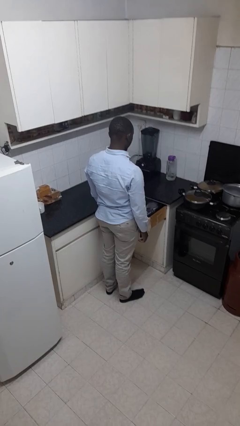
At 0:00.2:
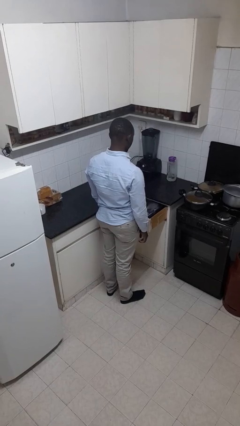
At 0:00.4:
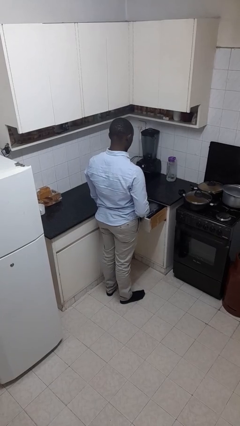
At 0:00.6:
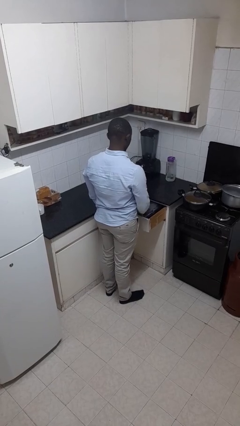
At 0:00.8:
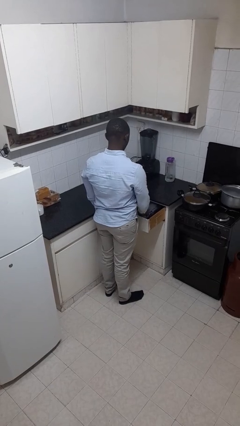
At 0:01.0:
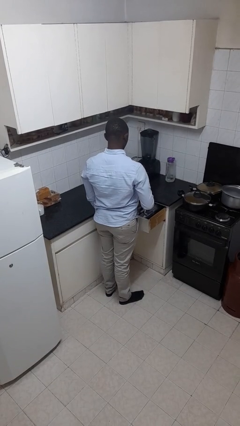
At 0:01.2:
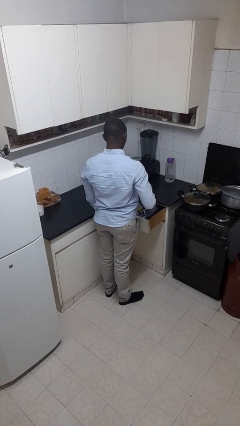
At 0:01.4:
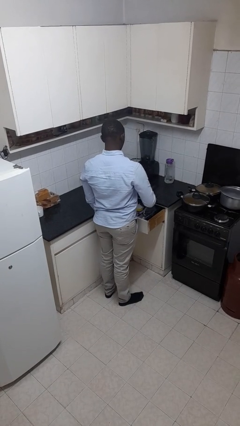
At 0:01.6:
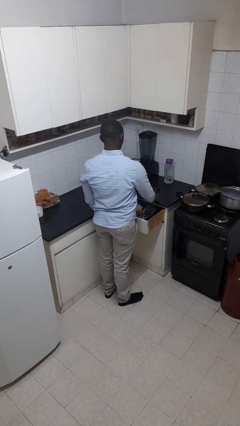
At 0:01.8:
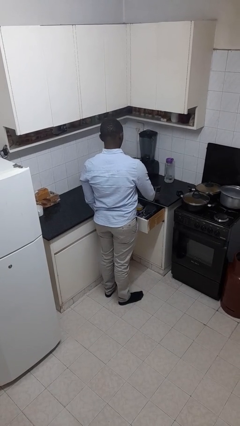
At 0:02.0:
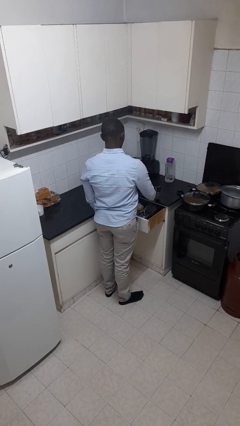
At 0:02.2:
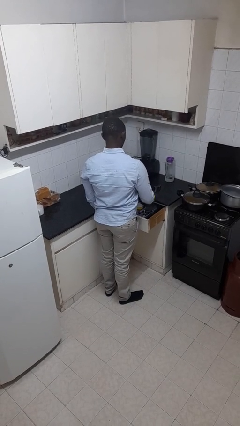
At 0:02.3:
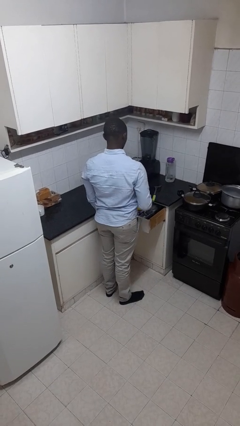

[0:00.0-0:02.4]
person takes object from kitchen drawer

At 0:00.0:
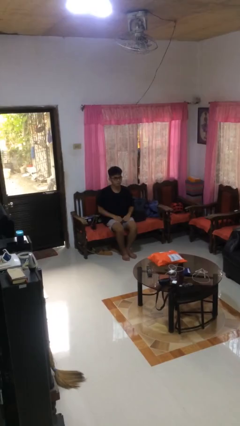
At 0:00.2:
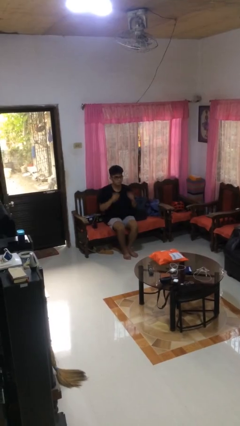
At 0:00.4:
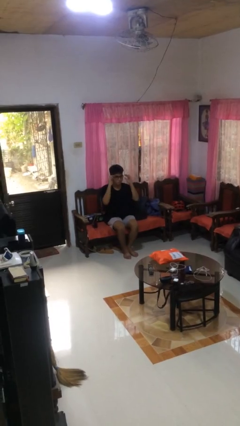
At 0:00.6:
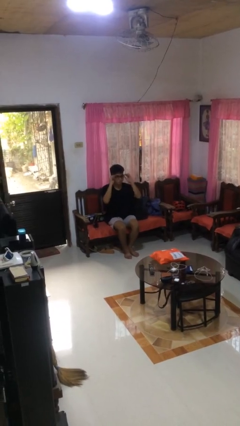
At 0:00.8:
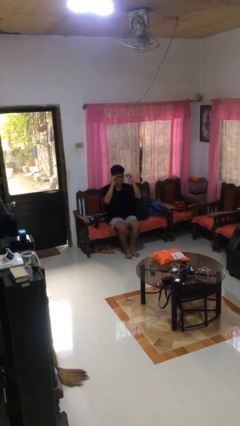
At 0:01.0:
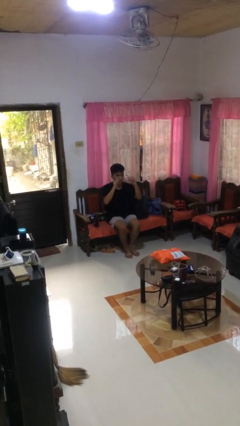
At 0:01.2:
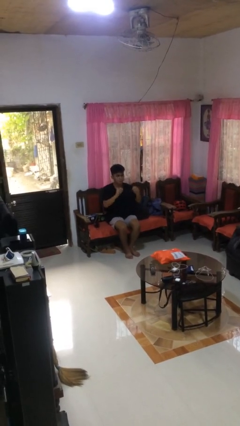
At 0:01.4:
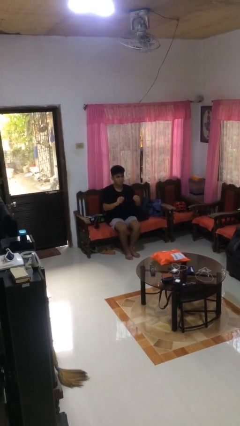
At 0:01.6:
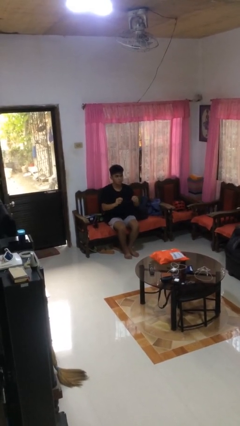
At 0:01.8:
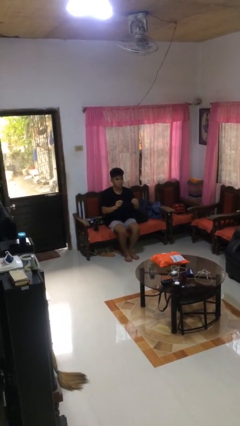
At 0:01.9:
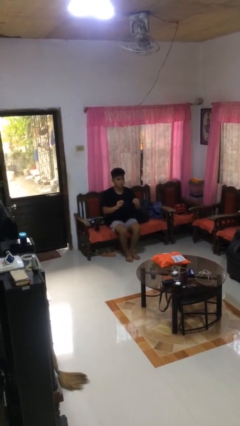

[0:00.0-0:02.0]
person takes off glasses

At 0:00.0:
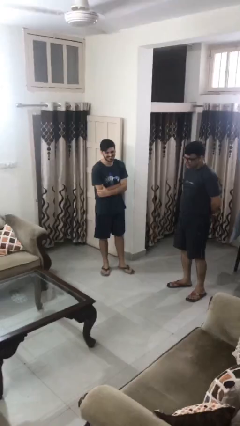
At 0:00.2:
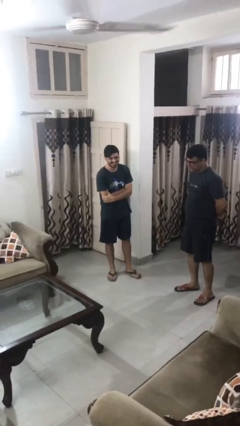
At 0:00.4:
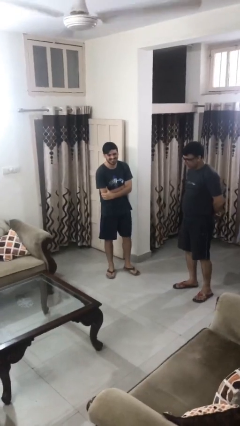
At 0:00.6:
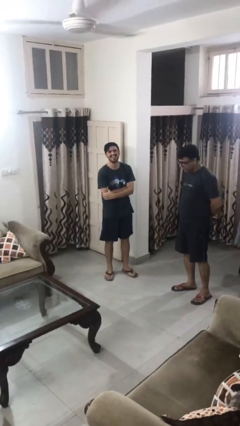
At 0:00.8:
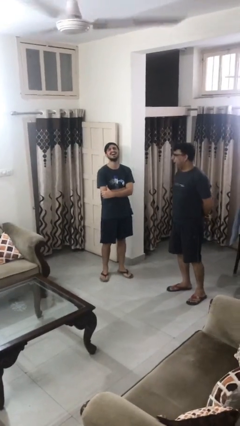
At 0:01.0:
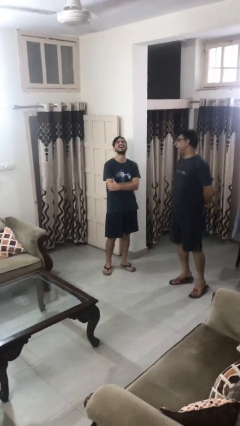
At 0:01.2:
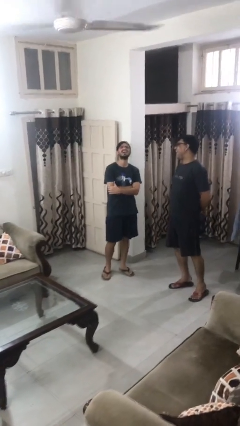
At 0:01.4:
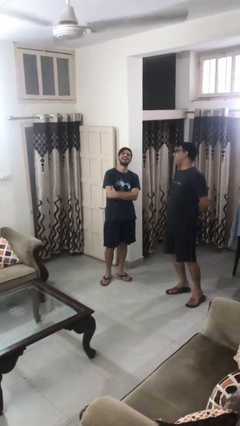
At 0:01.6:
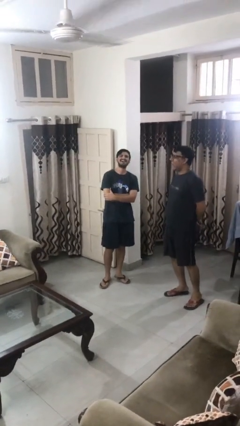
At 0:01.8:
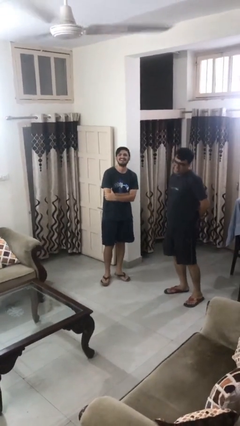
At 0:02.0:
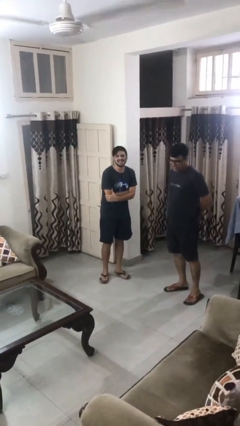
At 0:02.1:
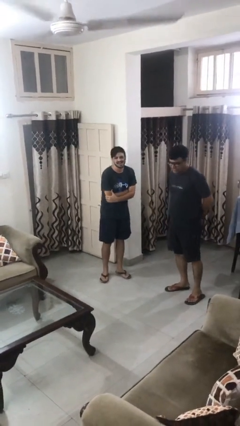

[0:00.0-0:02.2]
person laughs with person

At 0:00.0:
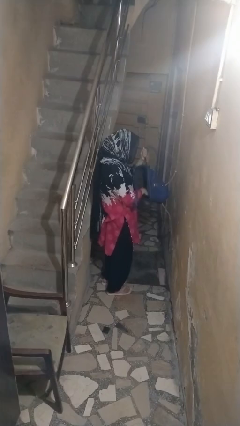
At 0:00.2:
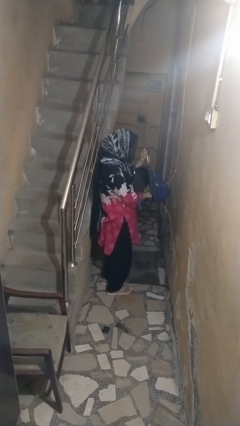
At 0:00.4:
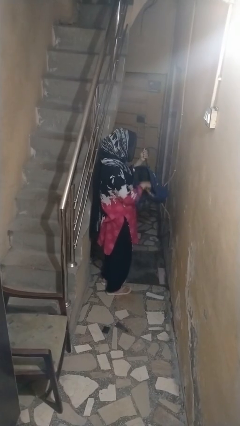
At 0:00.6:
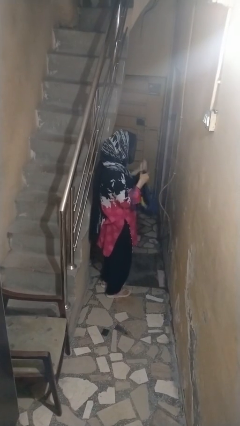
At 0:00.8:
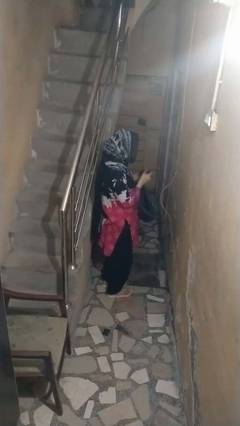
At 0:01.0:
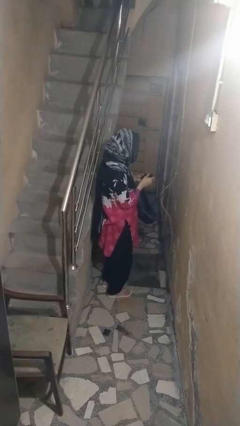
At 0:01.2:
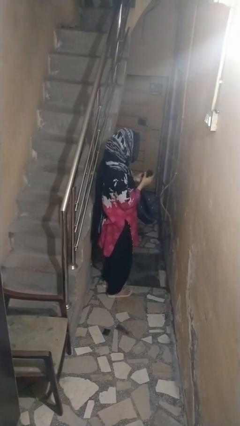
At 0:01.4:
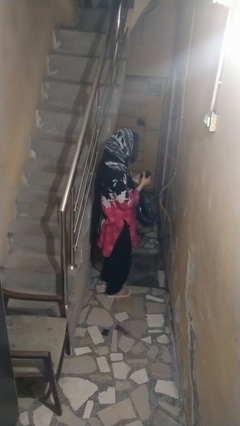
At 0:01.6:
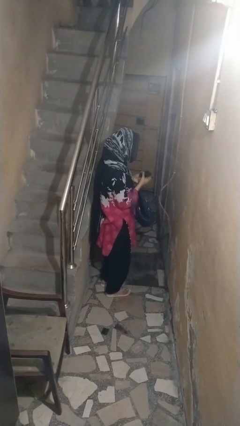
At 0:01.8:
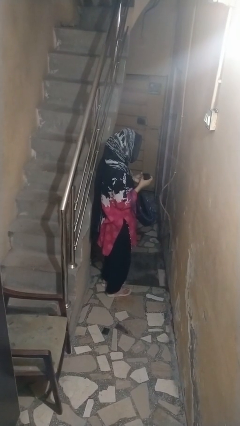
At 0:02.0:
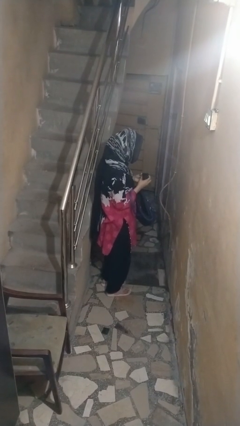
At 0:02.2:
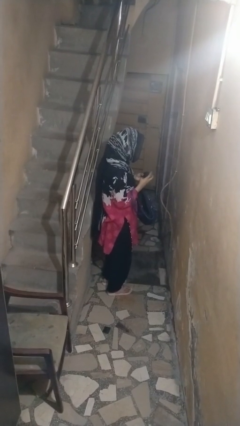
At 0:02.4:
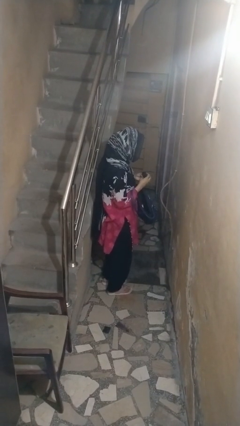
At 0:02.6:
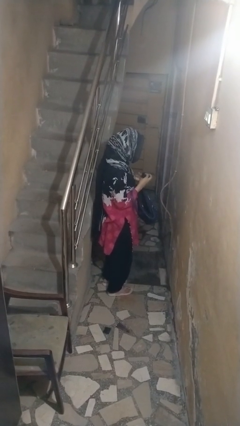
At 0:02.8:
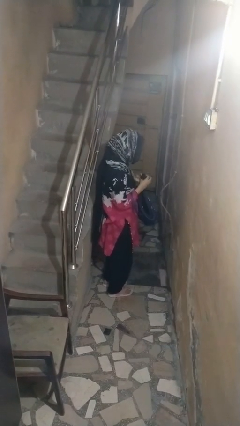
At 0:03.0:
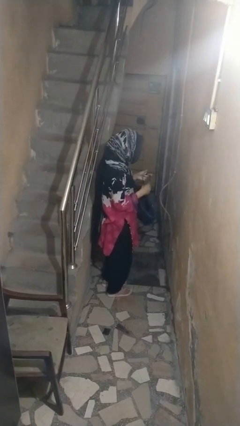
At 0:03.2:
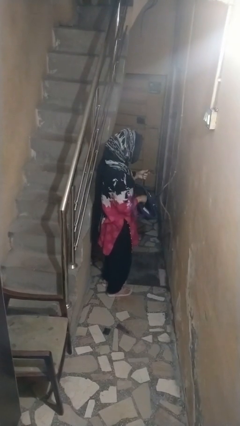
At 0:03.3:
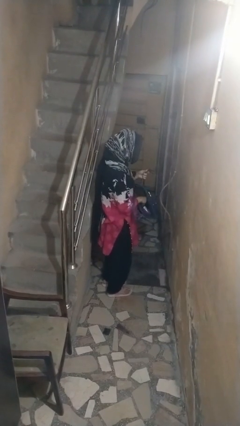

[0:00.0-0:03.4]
person takes object from purse

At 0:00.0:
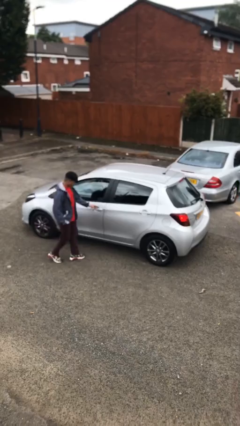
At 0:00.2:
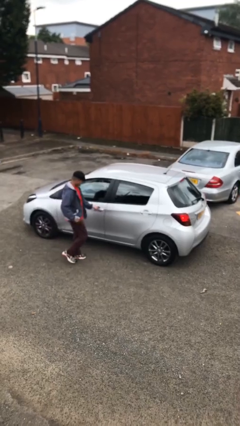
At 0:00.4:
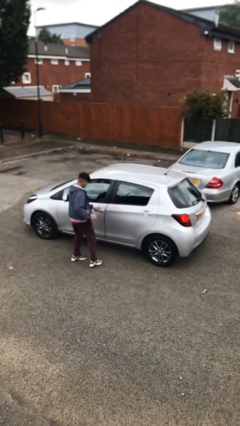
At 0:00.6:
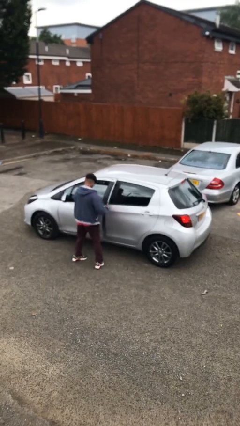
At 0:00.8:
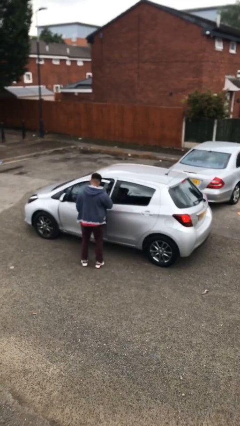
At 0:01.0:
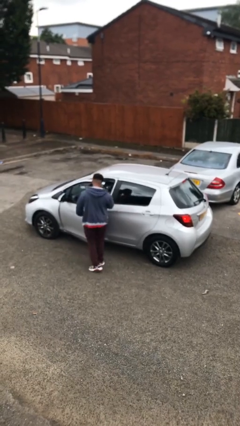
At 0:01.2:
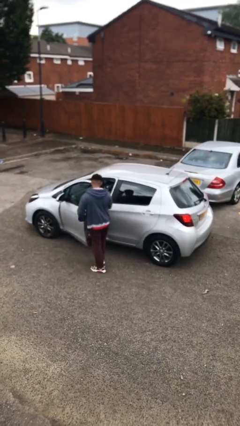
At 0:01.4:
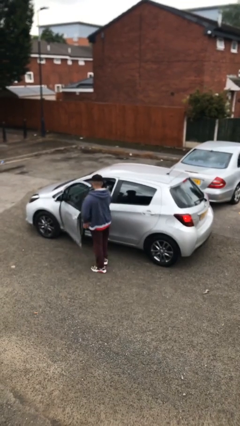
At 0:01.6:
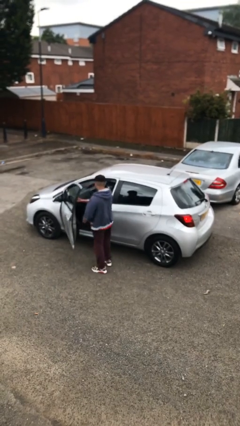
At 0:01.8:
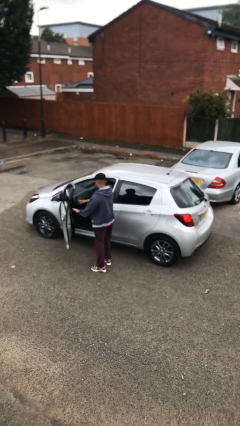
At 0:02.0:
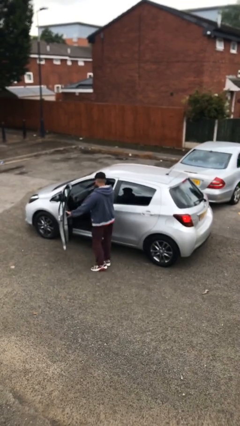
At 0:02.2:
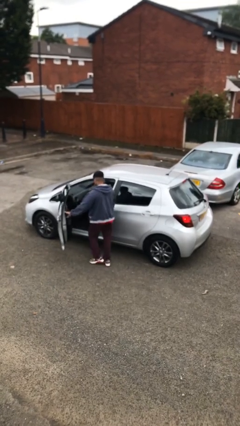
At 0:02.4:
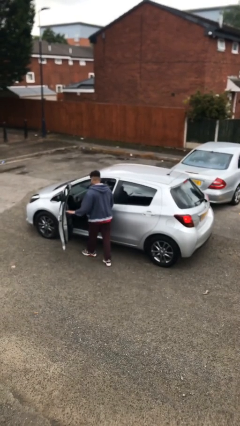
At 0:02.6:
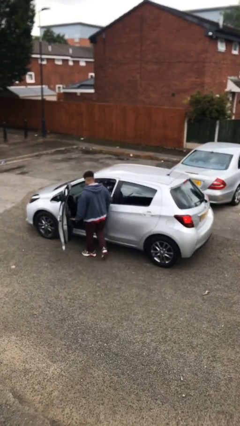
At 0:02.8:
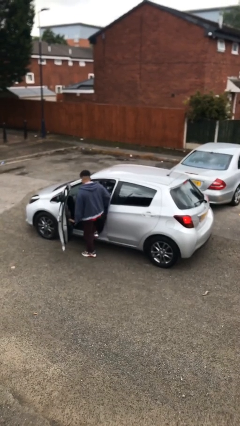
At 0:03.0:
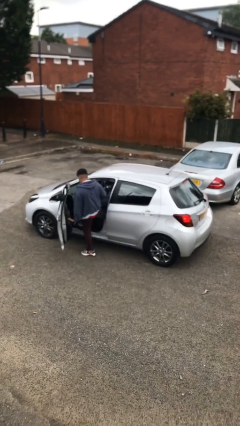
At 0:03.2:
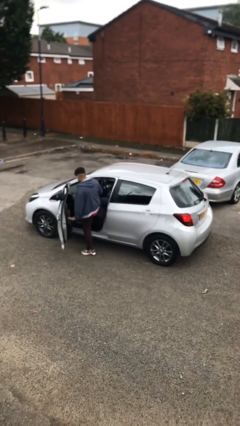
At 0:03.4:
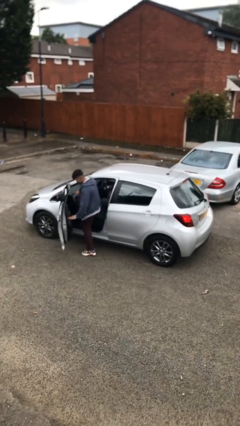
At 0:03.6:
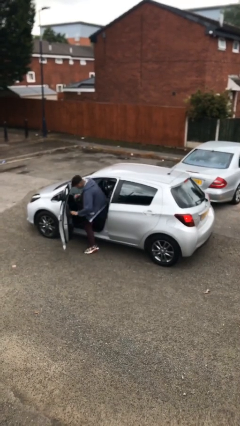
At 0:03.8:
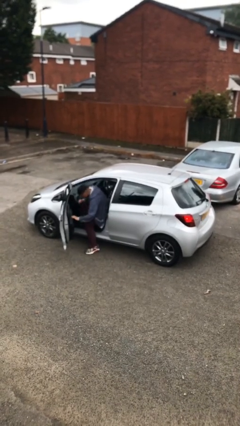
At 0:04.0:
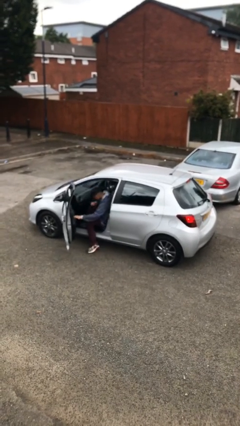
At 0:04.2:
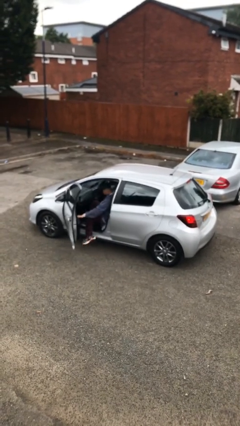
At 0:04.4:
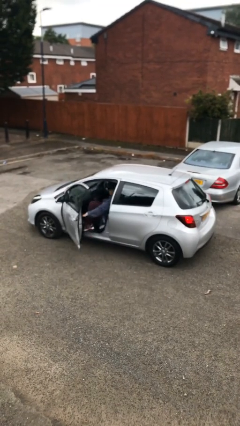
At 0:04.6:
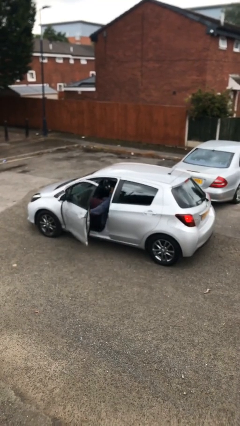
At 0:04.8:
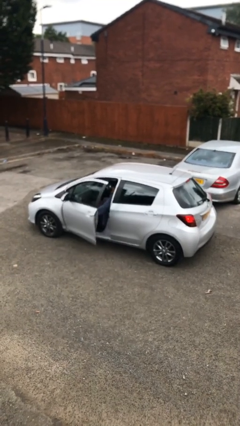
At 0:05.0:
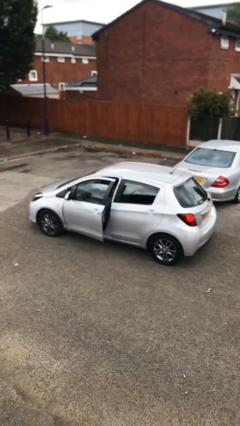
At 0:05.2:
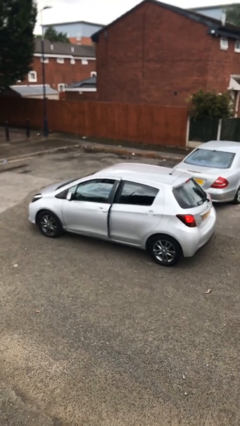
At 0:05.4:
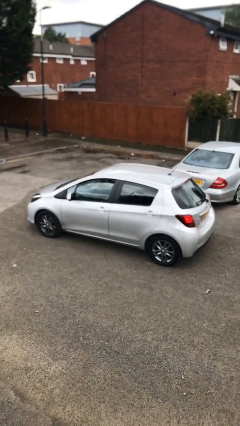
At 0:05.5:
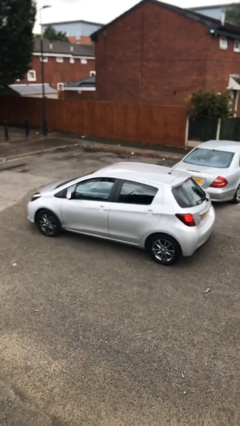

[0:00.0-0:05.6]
car picks up person

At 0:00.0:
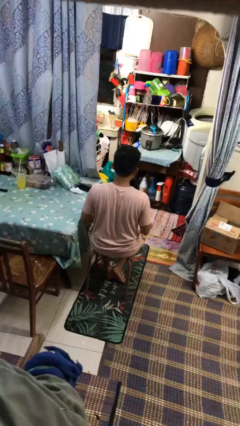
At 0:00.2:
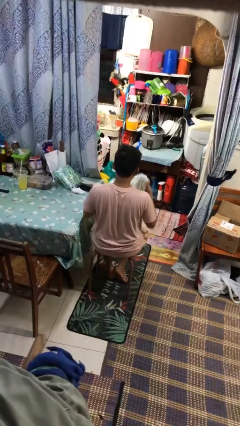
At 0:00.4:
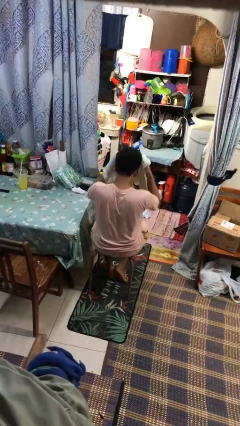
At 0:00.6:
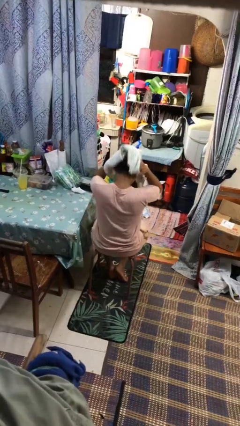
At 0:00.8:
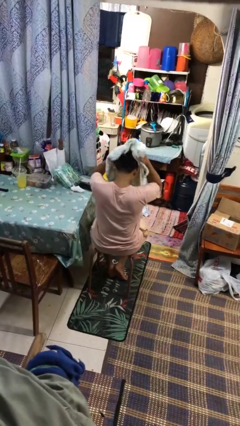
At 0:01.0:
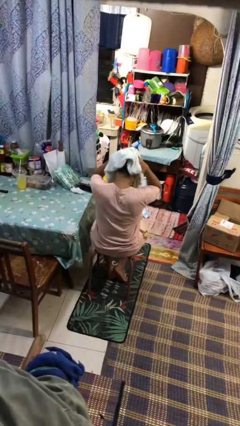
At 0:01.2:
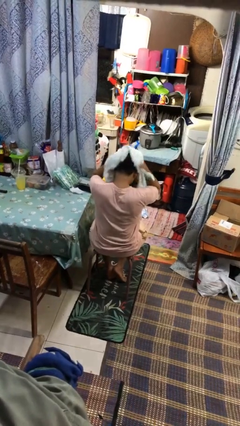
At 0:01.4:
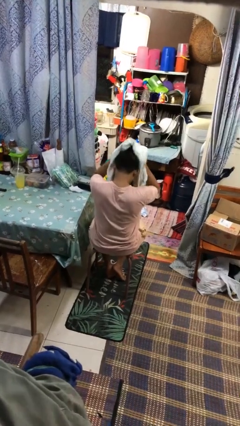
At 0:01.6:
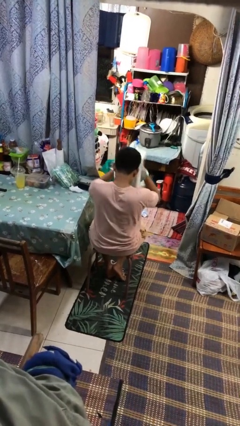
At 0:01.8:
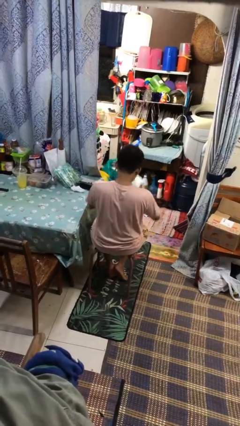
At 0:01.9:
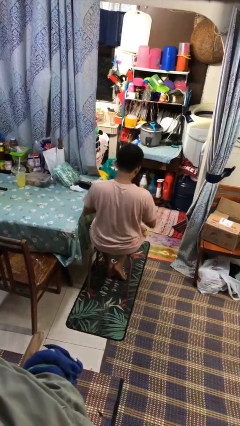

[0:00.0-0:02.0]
person dries hair with towel
